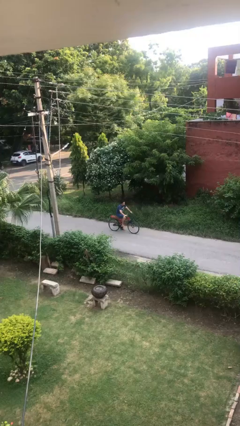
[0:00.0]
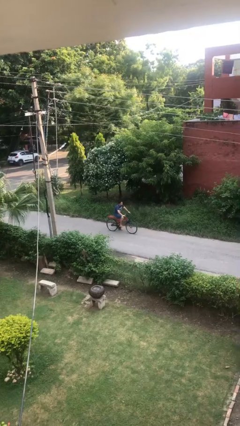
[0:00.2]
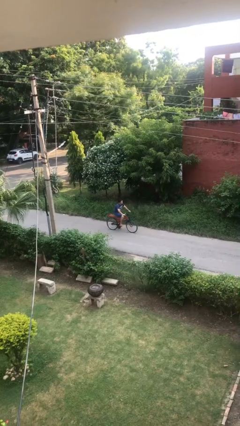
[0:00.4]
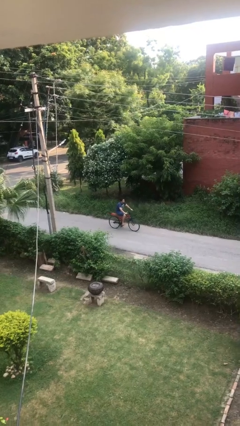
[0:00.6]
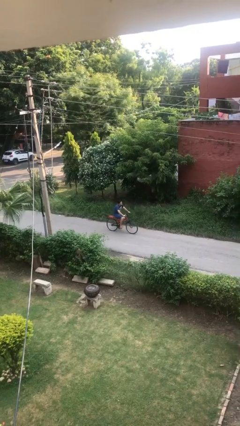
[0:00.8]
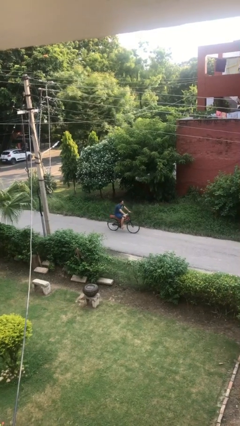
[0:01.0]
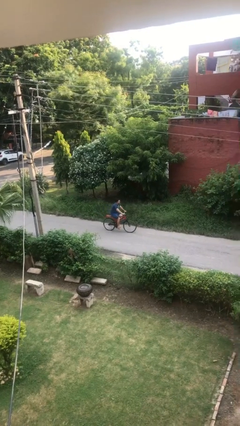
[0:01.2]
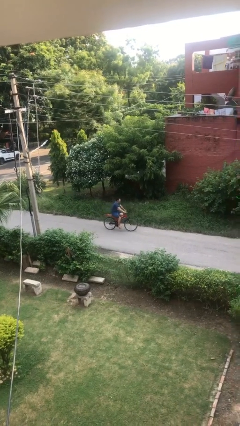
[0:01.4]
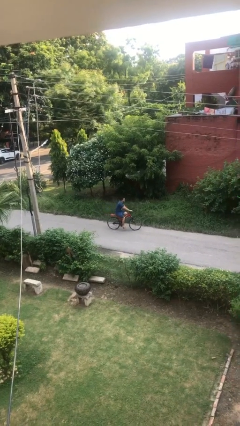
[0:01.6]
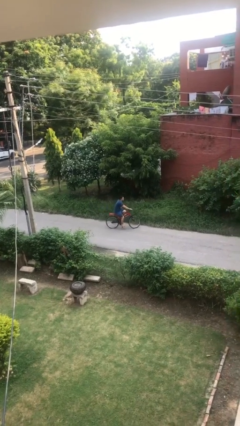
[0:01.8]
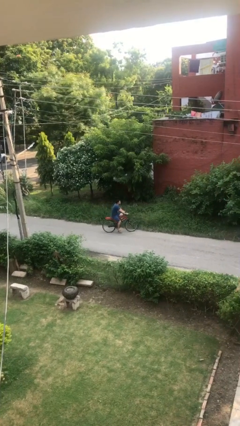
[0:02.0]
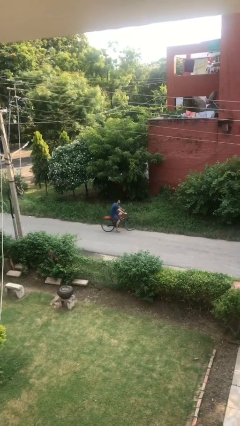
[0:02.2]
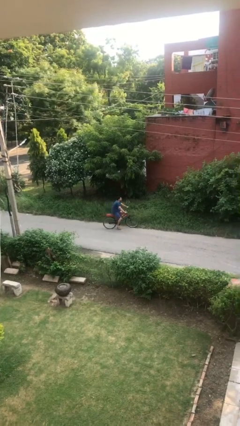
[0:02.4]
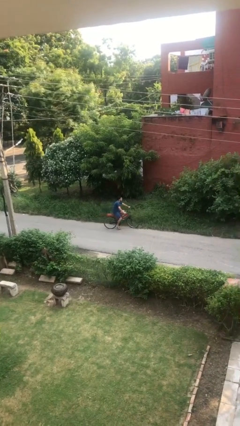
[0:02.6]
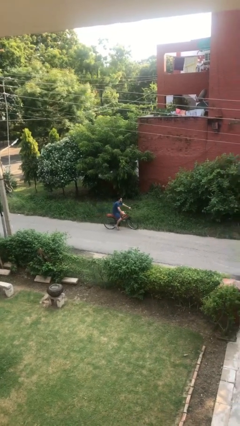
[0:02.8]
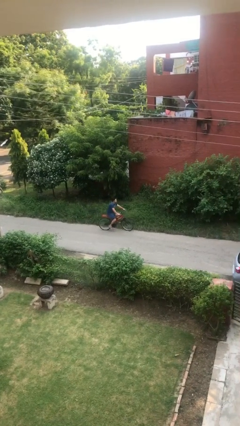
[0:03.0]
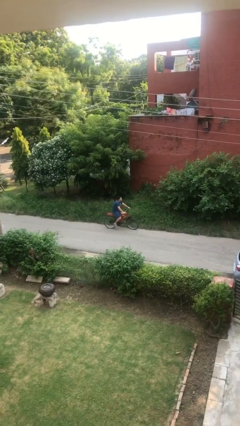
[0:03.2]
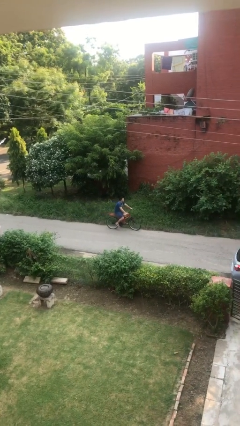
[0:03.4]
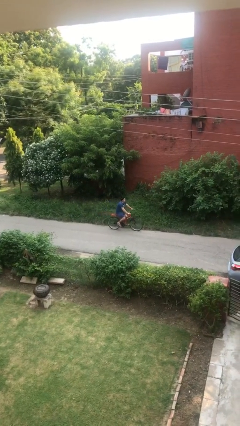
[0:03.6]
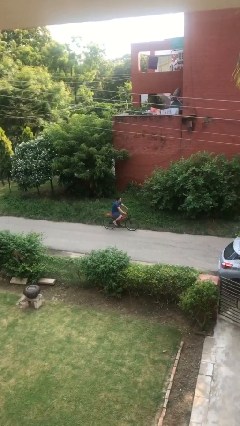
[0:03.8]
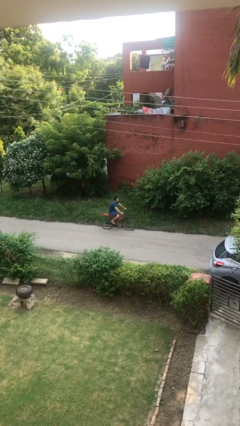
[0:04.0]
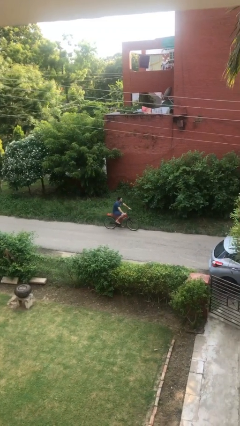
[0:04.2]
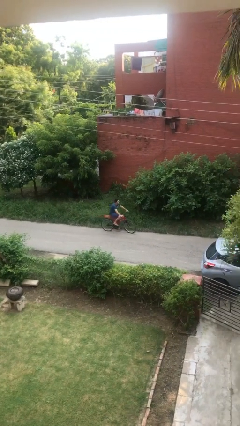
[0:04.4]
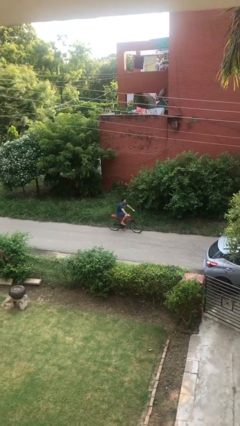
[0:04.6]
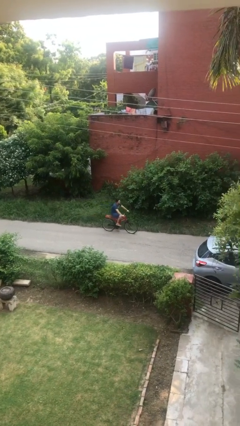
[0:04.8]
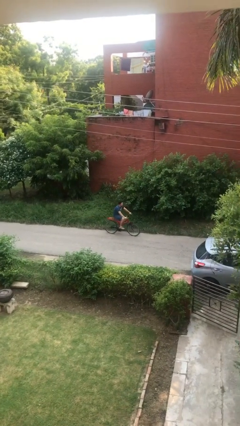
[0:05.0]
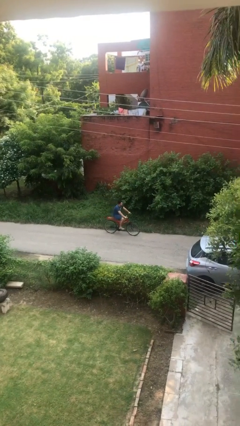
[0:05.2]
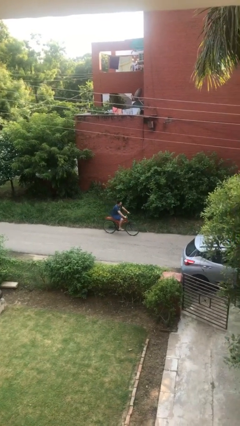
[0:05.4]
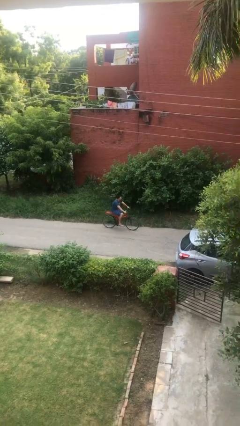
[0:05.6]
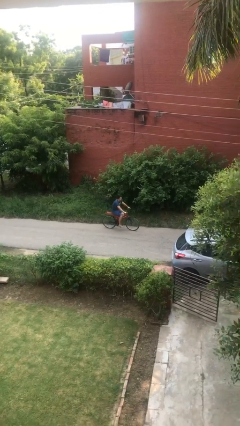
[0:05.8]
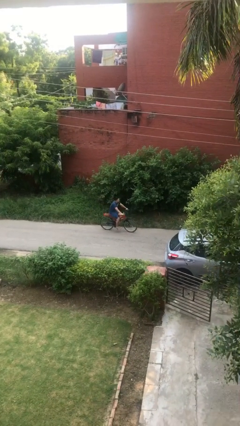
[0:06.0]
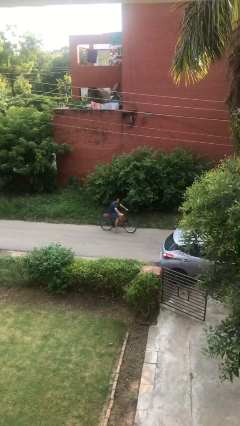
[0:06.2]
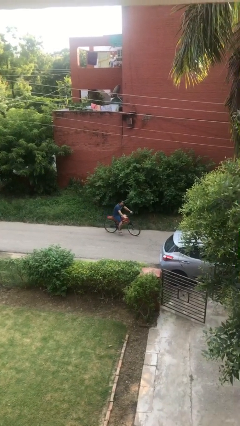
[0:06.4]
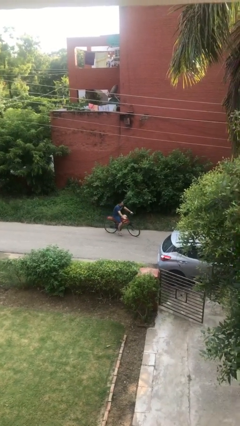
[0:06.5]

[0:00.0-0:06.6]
person rides bicycle

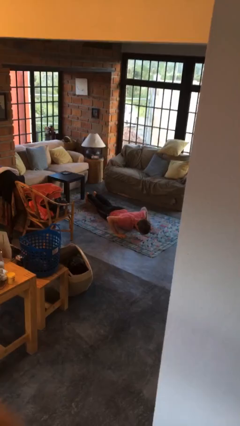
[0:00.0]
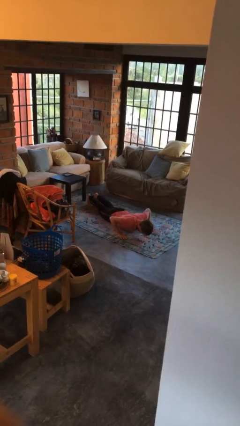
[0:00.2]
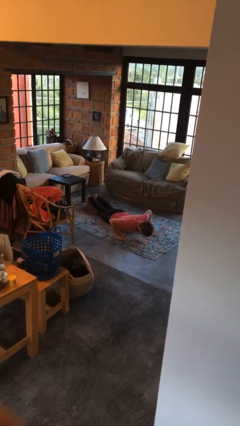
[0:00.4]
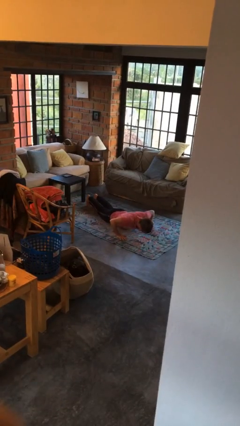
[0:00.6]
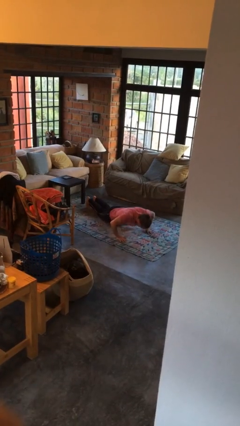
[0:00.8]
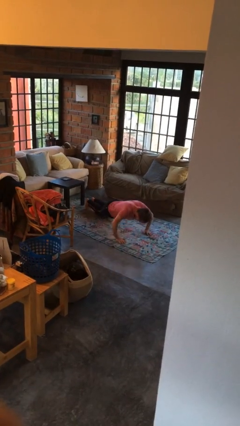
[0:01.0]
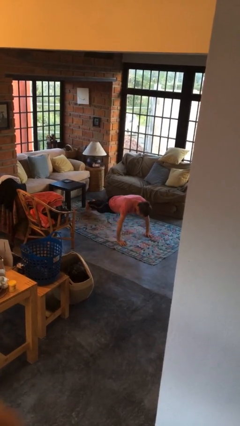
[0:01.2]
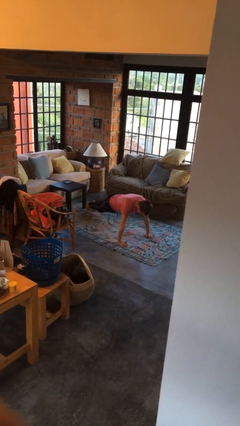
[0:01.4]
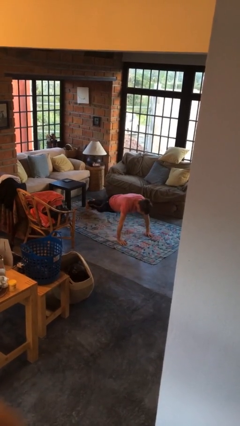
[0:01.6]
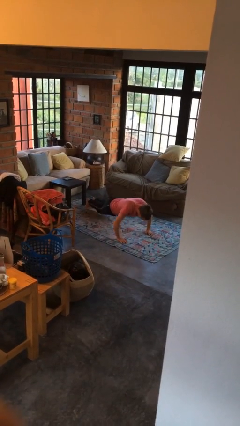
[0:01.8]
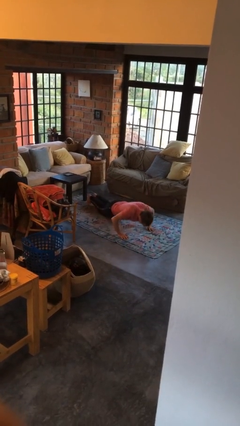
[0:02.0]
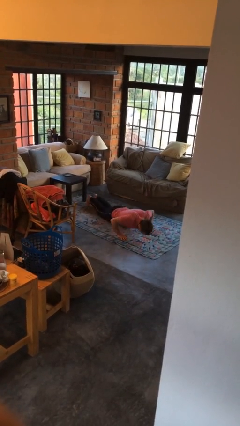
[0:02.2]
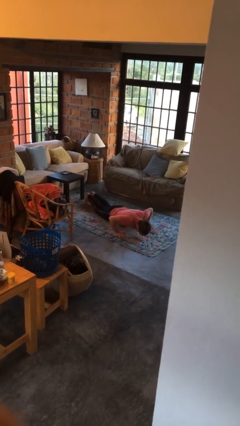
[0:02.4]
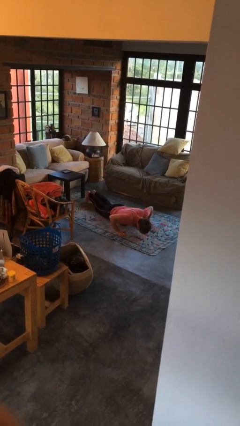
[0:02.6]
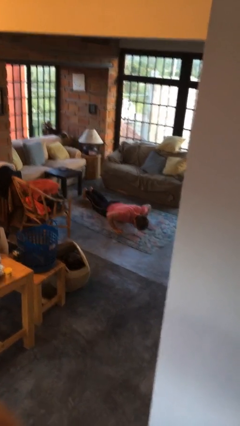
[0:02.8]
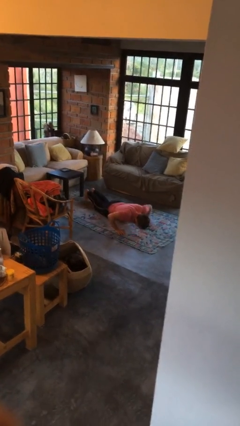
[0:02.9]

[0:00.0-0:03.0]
person exercises with pushup

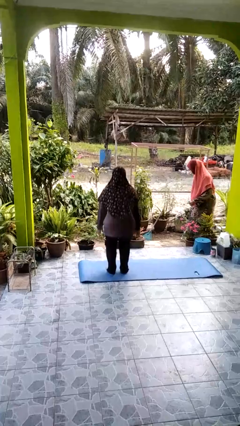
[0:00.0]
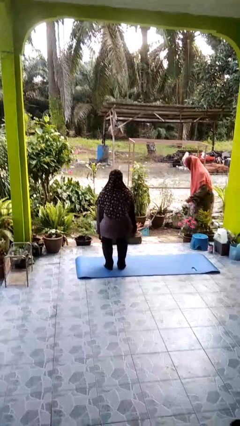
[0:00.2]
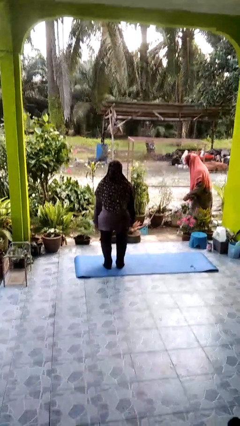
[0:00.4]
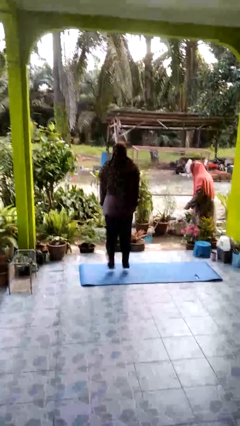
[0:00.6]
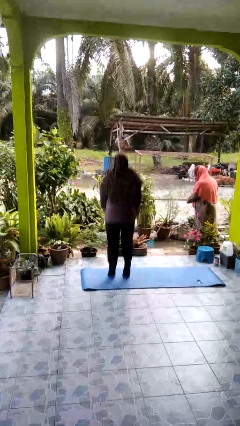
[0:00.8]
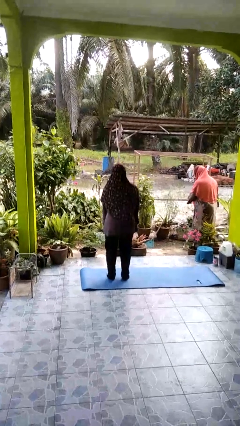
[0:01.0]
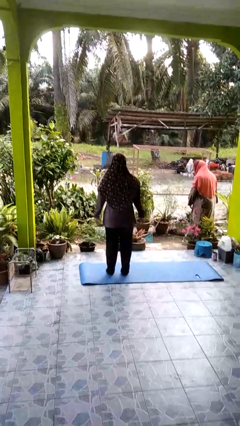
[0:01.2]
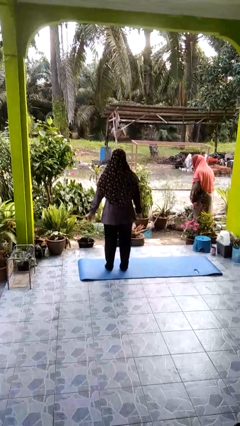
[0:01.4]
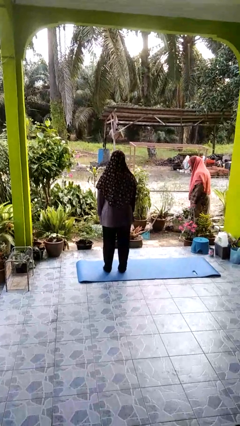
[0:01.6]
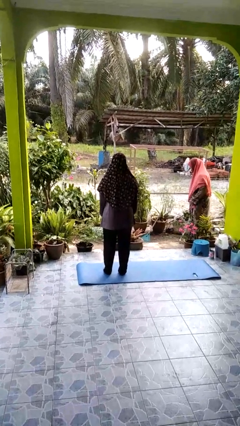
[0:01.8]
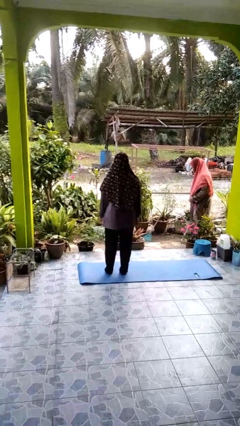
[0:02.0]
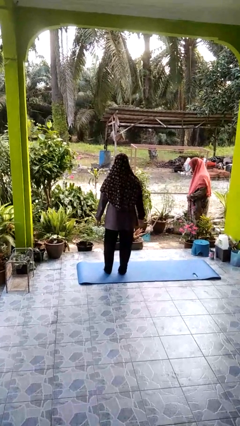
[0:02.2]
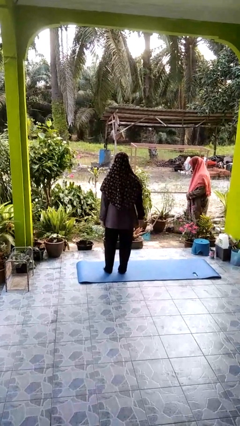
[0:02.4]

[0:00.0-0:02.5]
person jumps

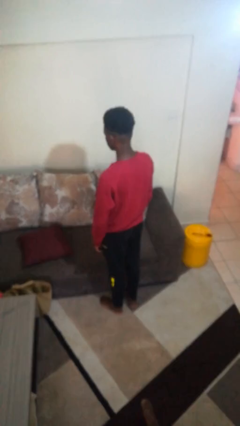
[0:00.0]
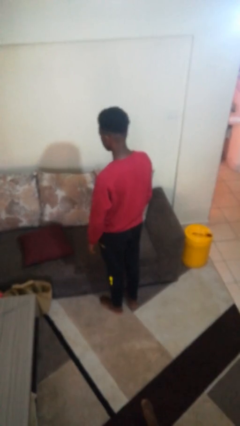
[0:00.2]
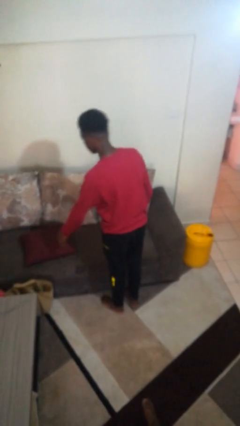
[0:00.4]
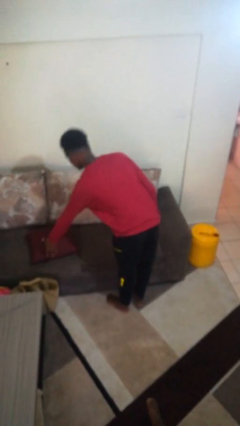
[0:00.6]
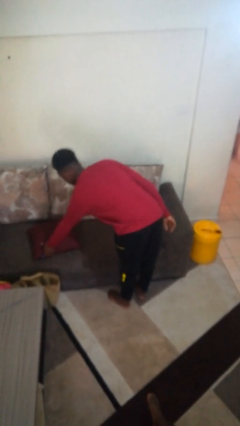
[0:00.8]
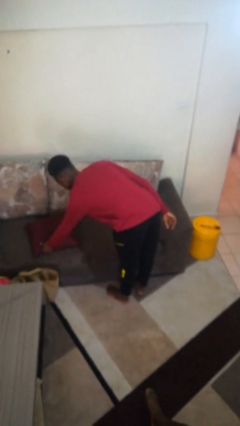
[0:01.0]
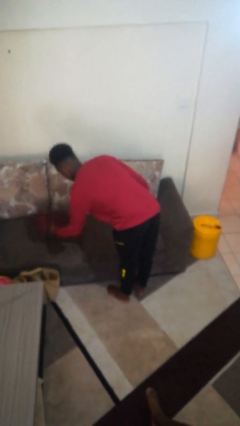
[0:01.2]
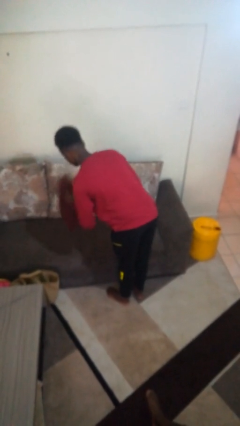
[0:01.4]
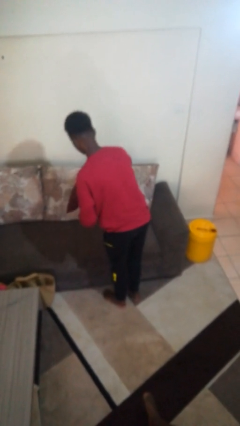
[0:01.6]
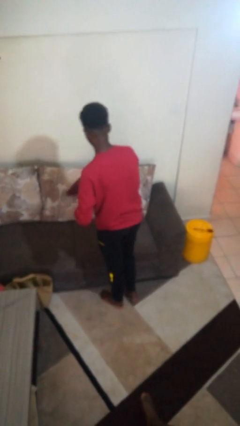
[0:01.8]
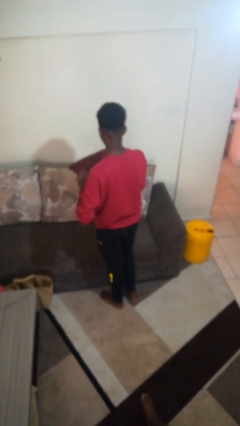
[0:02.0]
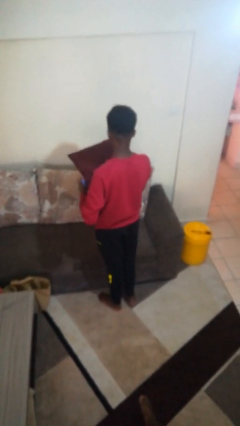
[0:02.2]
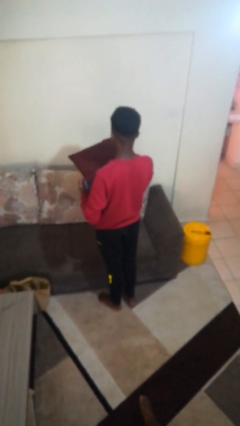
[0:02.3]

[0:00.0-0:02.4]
person picks up object from couch

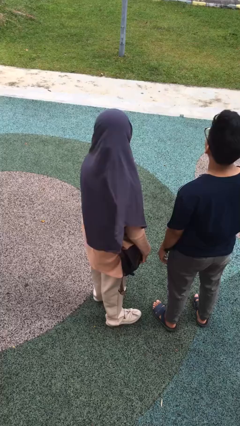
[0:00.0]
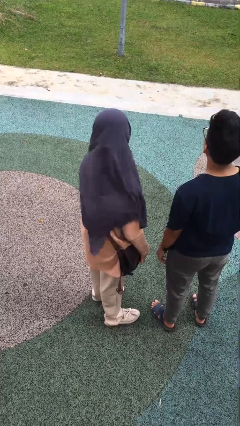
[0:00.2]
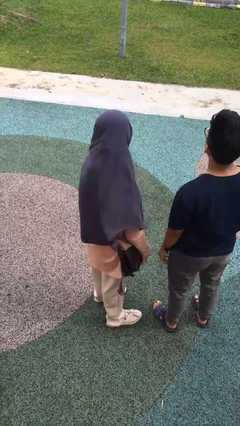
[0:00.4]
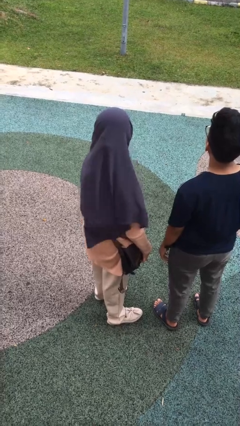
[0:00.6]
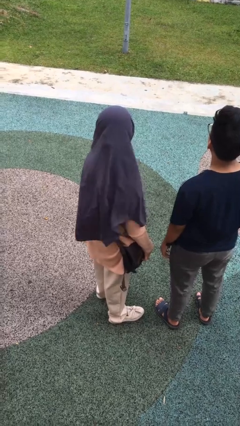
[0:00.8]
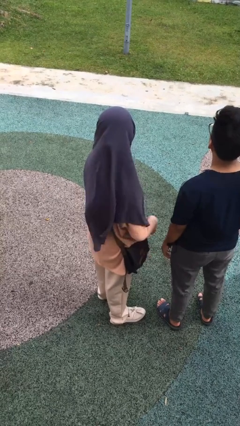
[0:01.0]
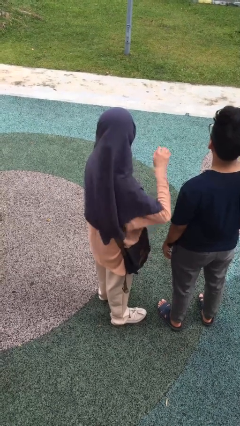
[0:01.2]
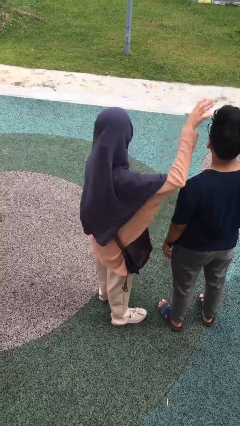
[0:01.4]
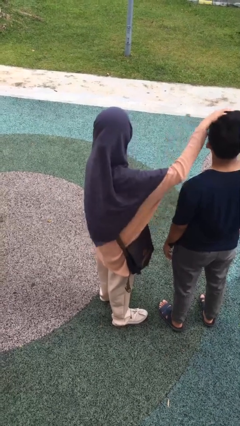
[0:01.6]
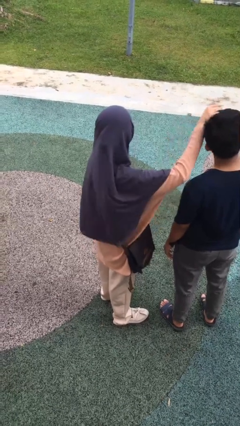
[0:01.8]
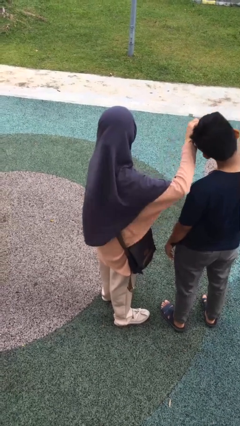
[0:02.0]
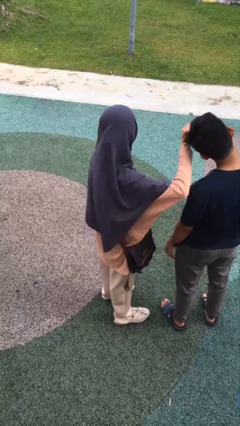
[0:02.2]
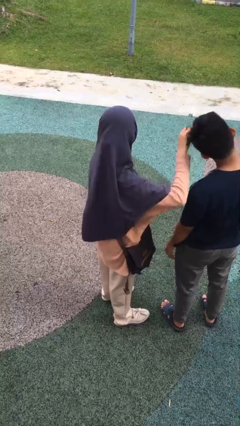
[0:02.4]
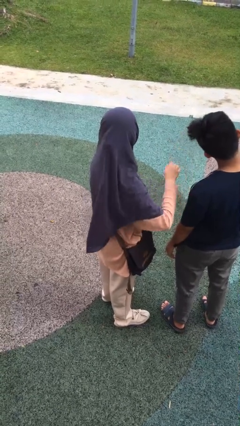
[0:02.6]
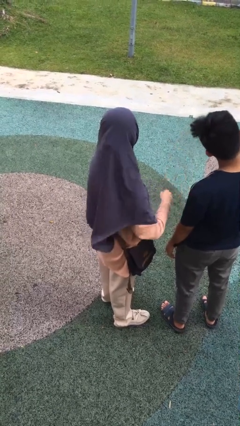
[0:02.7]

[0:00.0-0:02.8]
person grabs person by hair

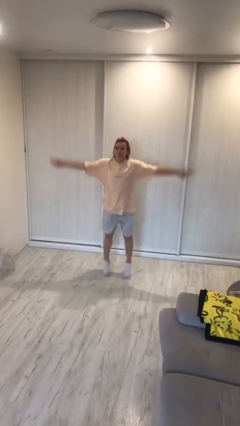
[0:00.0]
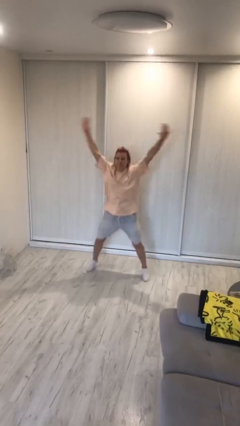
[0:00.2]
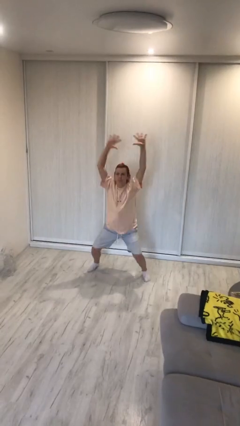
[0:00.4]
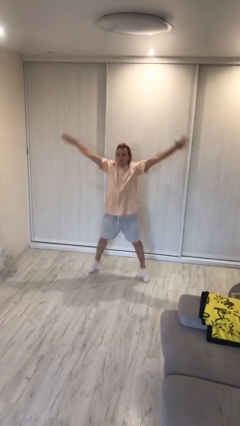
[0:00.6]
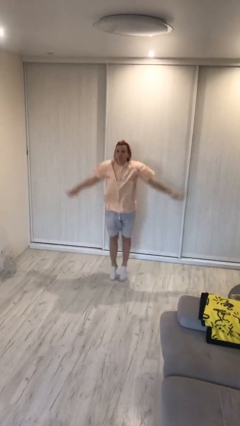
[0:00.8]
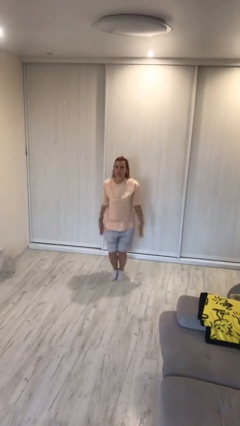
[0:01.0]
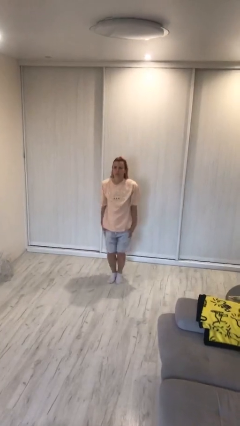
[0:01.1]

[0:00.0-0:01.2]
person exercises with jumping jacks
